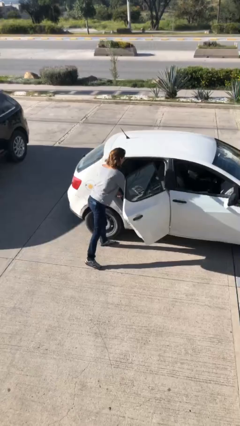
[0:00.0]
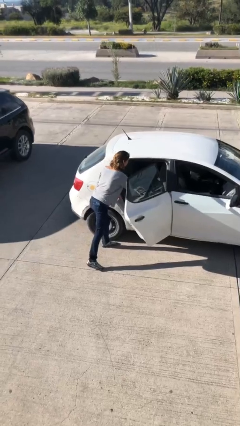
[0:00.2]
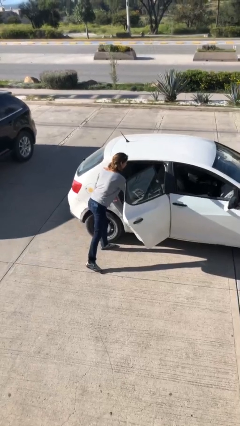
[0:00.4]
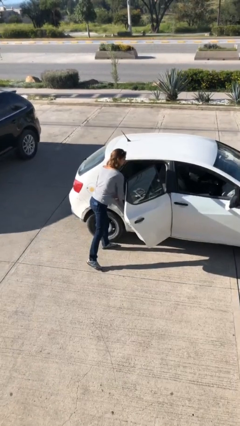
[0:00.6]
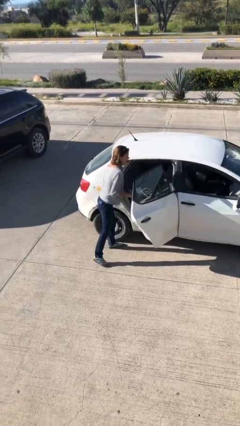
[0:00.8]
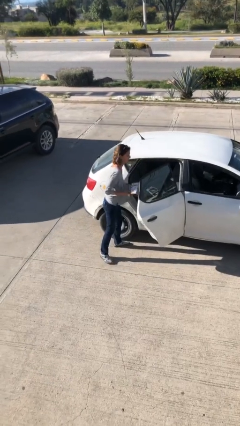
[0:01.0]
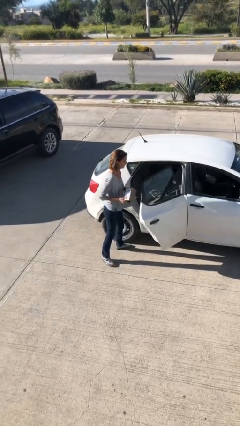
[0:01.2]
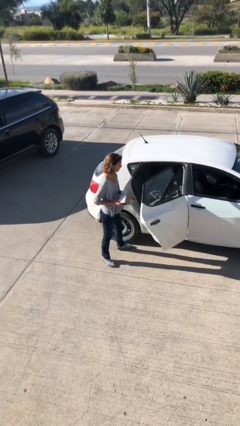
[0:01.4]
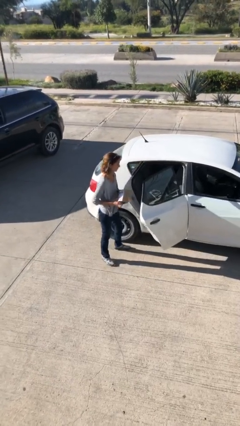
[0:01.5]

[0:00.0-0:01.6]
person unloads car

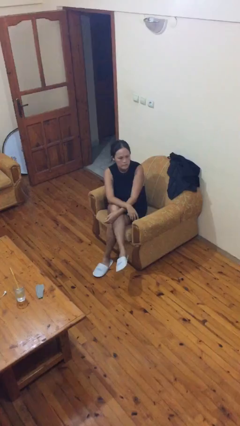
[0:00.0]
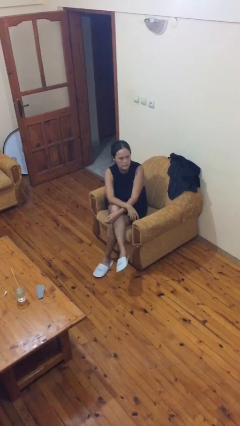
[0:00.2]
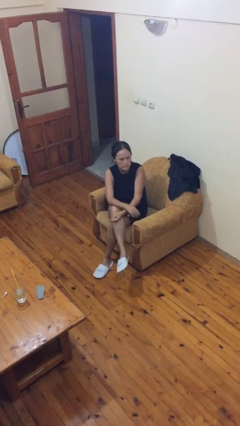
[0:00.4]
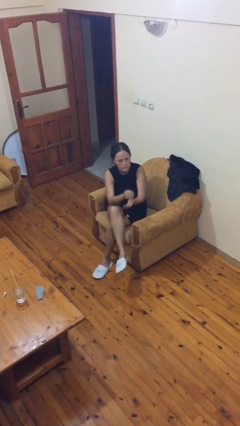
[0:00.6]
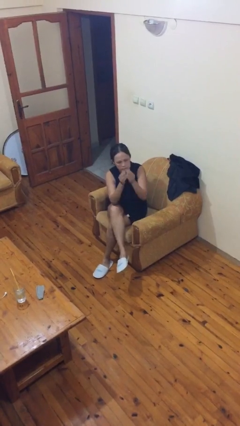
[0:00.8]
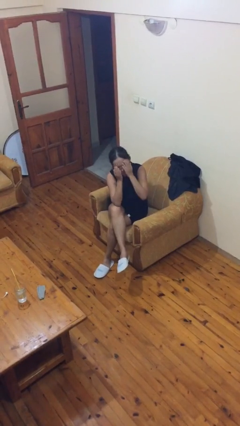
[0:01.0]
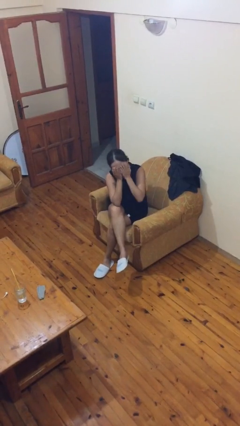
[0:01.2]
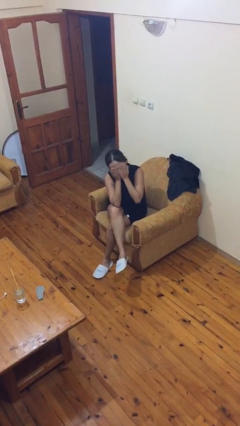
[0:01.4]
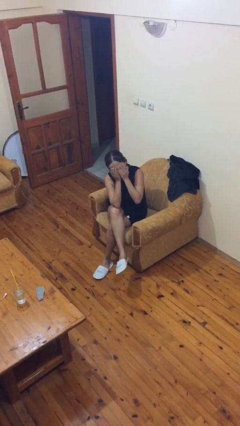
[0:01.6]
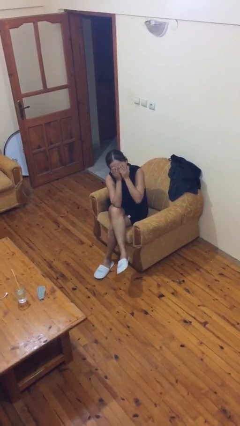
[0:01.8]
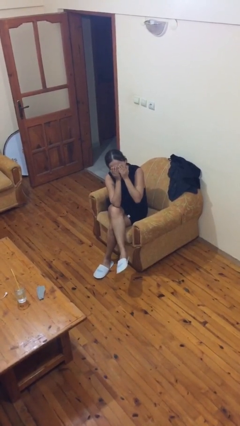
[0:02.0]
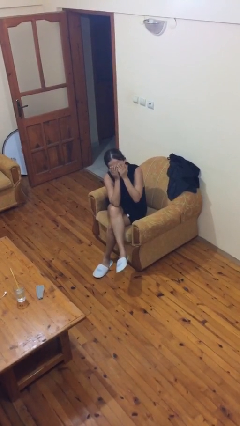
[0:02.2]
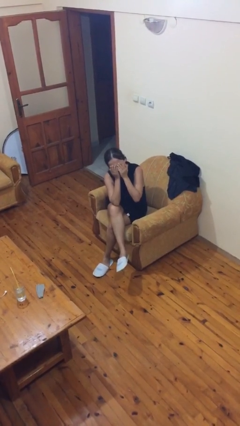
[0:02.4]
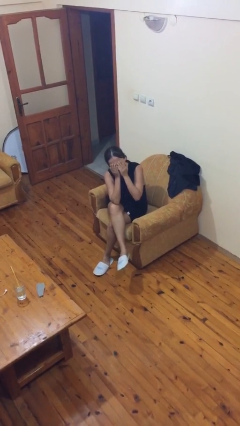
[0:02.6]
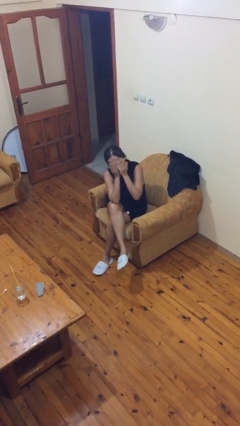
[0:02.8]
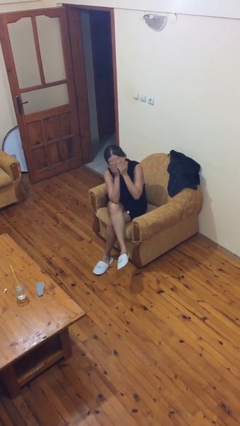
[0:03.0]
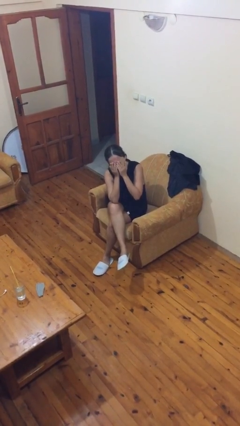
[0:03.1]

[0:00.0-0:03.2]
person covers face with hands

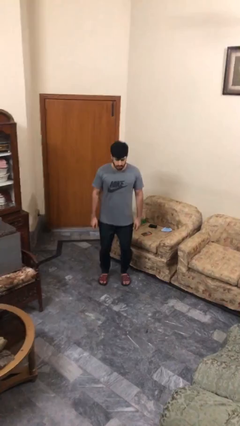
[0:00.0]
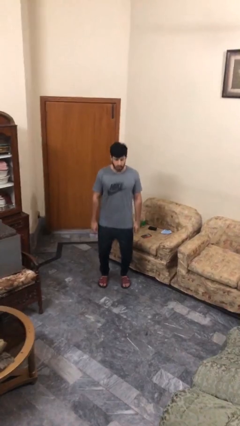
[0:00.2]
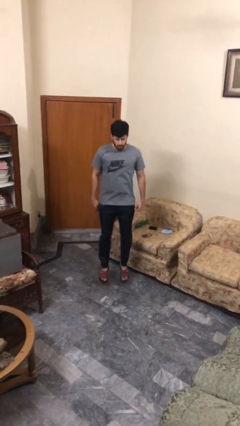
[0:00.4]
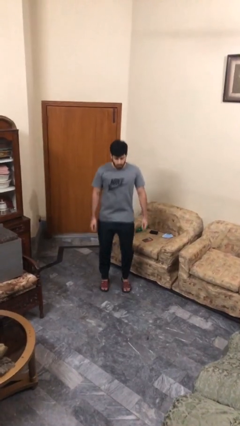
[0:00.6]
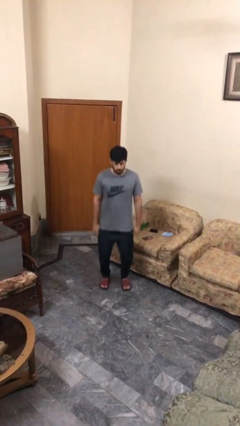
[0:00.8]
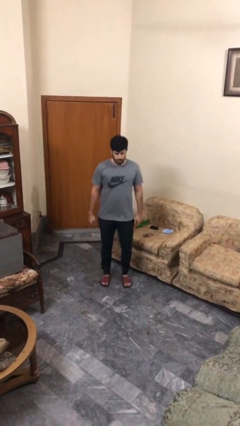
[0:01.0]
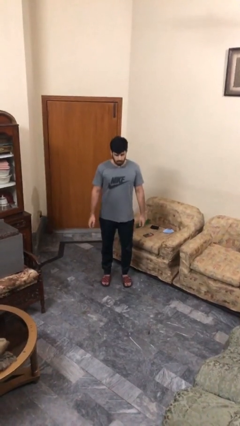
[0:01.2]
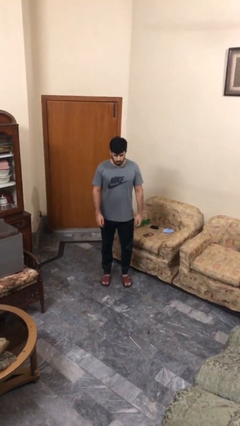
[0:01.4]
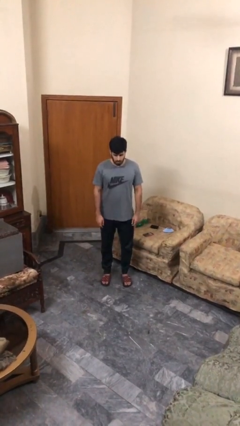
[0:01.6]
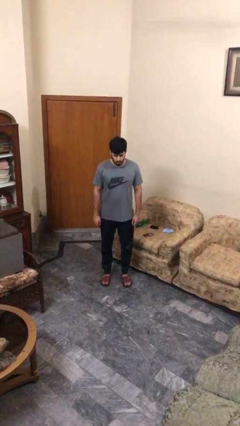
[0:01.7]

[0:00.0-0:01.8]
person jumps

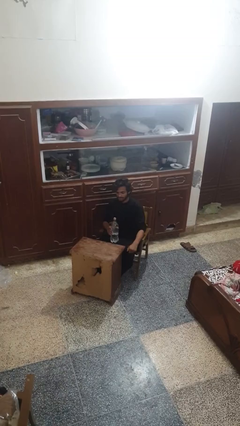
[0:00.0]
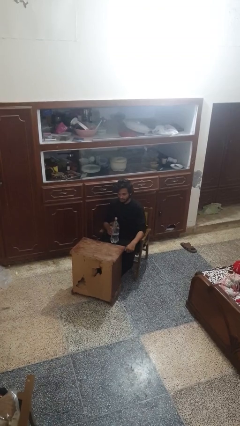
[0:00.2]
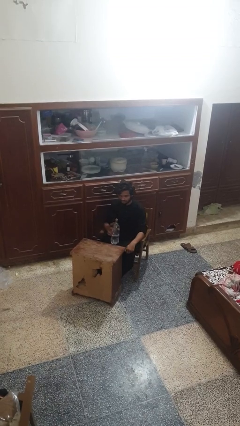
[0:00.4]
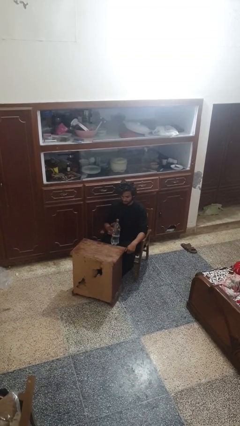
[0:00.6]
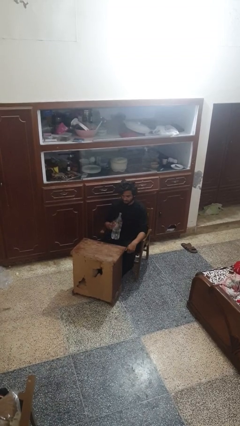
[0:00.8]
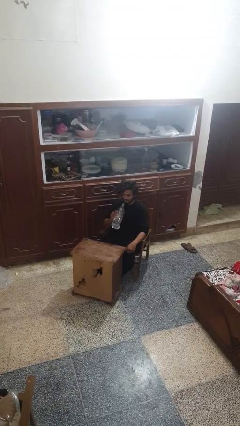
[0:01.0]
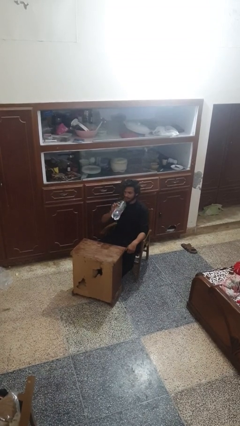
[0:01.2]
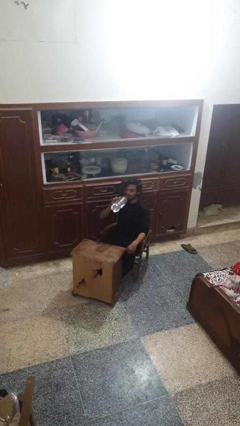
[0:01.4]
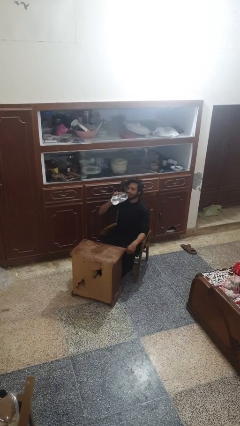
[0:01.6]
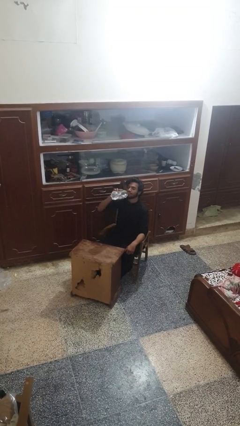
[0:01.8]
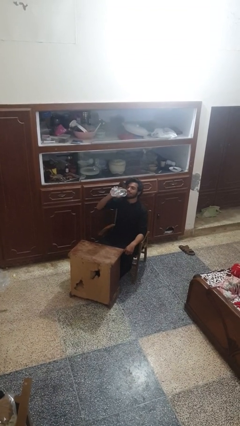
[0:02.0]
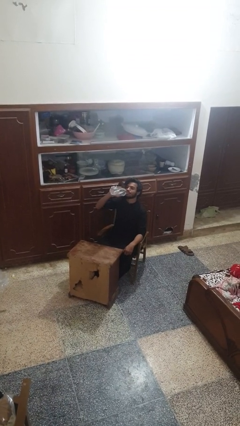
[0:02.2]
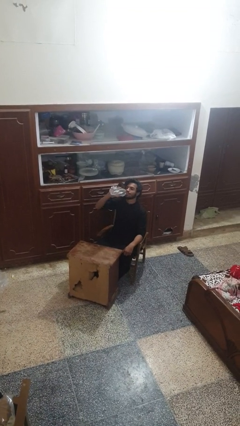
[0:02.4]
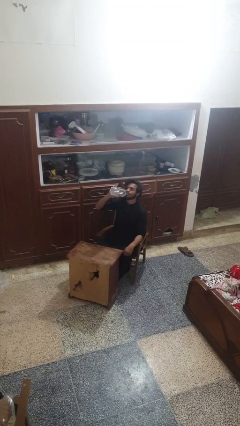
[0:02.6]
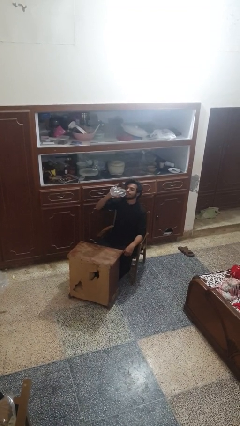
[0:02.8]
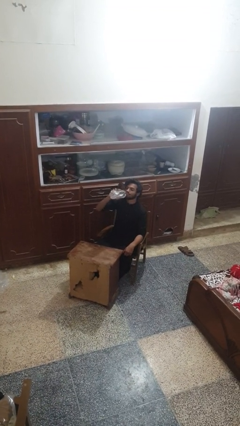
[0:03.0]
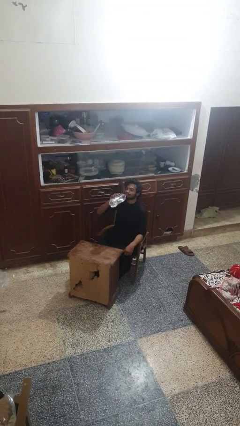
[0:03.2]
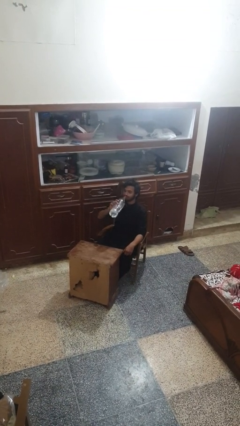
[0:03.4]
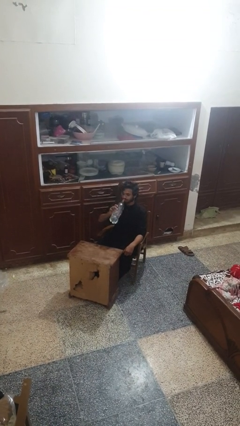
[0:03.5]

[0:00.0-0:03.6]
person drinks from bottle

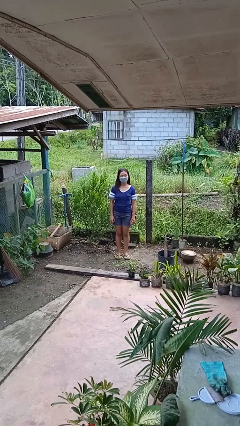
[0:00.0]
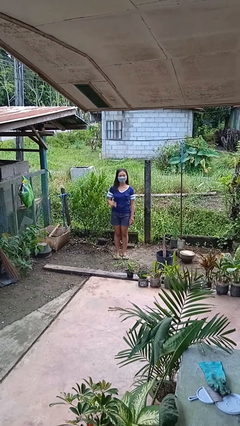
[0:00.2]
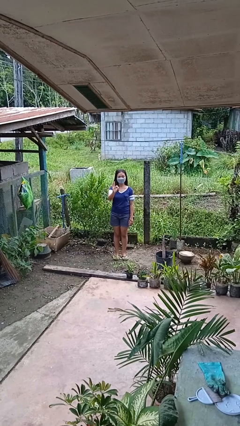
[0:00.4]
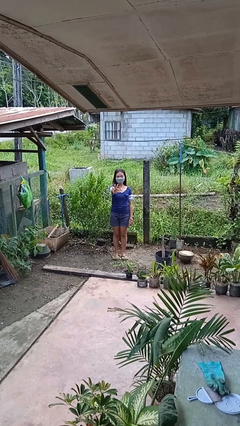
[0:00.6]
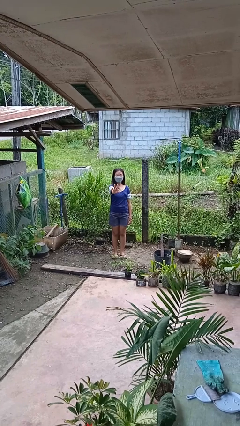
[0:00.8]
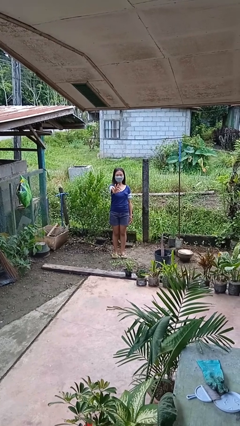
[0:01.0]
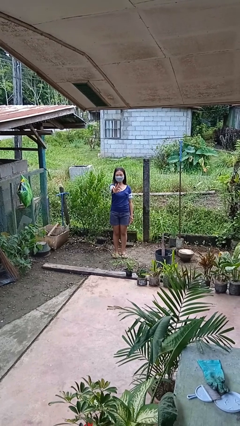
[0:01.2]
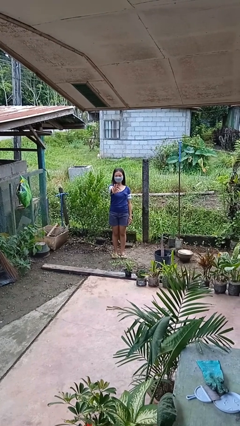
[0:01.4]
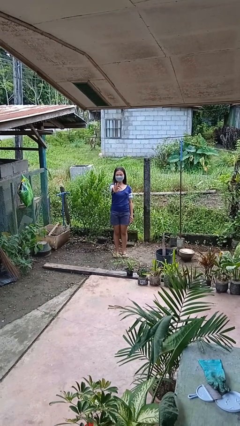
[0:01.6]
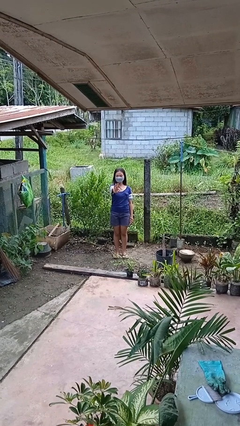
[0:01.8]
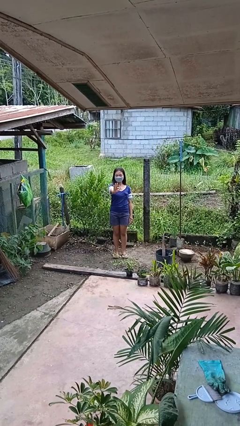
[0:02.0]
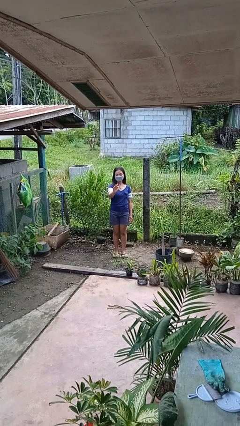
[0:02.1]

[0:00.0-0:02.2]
person gestures number three

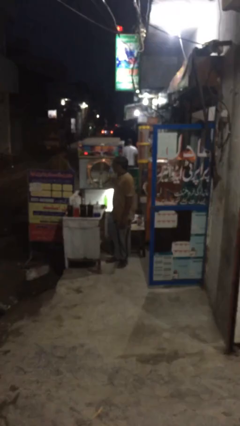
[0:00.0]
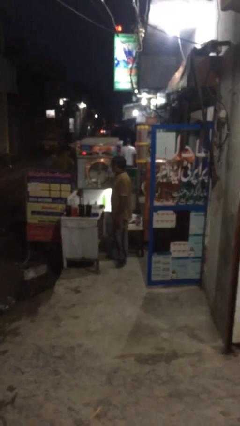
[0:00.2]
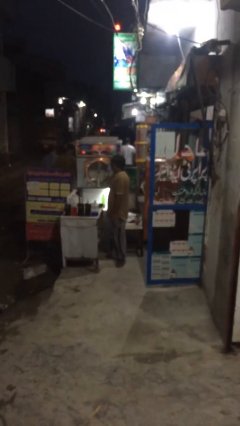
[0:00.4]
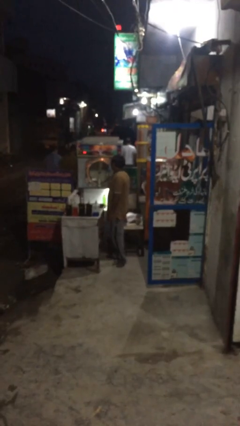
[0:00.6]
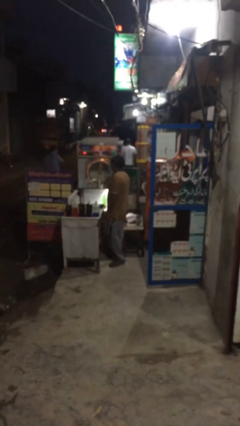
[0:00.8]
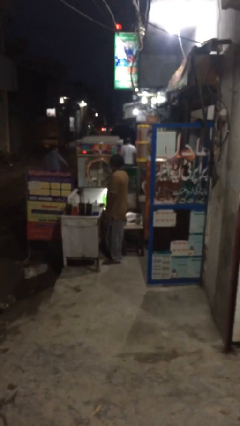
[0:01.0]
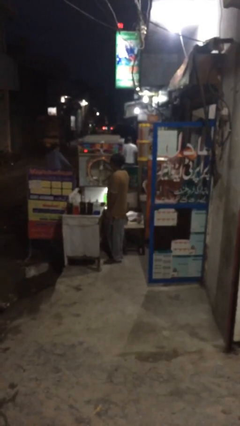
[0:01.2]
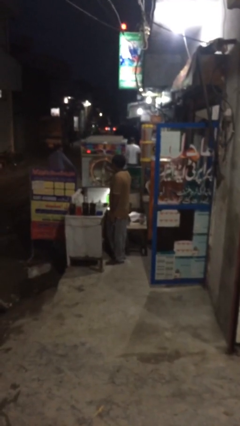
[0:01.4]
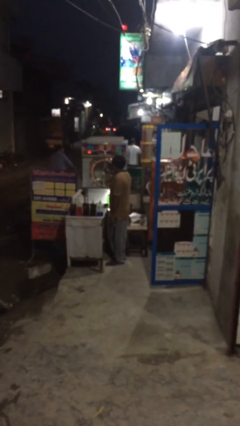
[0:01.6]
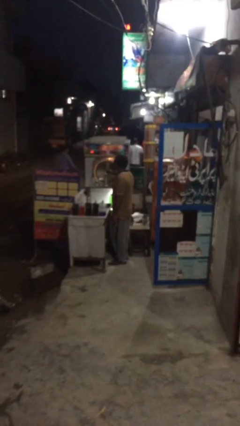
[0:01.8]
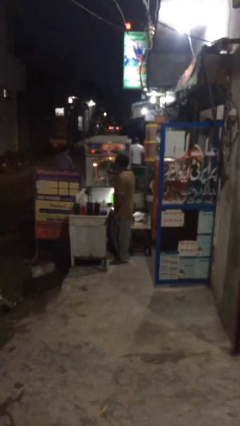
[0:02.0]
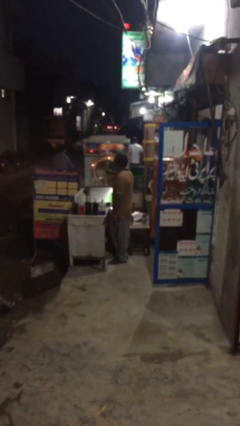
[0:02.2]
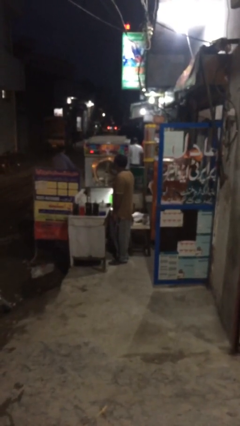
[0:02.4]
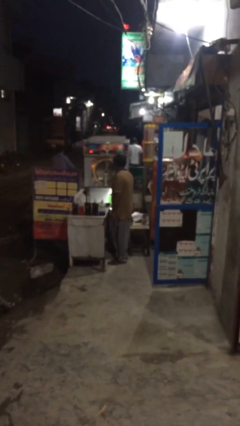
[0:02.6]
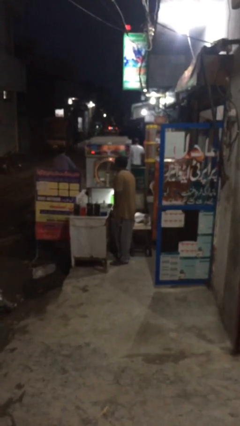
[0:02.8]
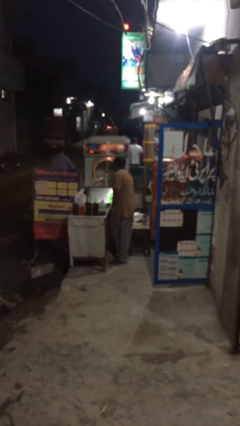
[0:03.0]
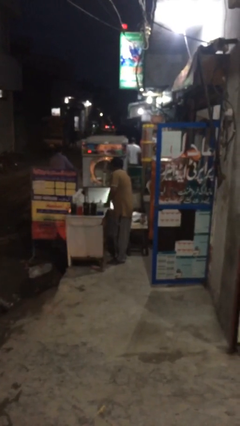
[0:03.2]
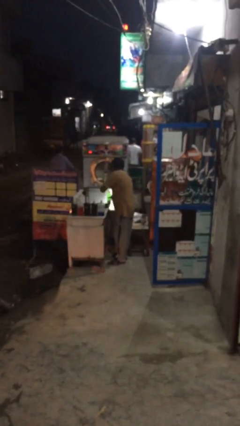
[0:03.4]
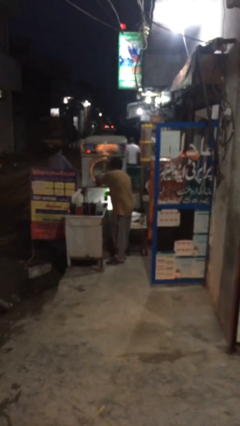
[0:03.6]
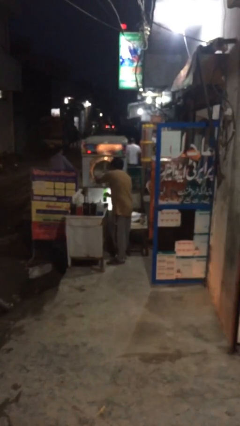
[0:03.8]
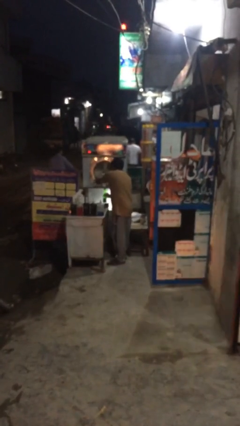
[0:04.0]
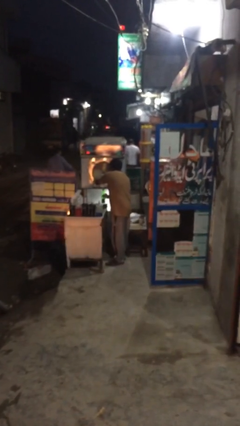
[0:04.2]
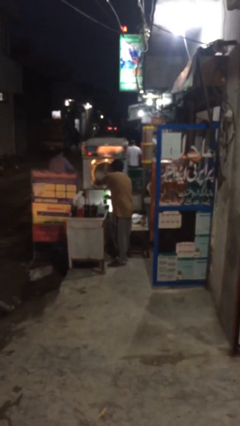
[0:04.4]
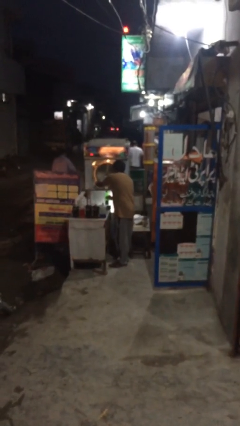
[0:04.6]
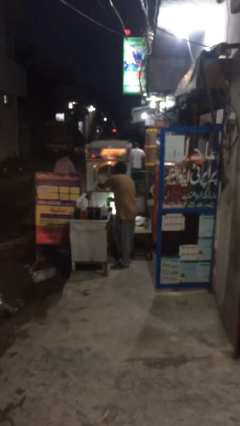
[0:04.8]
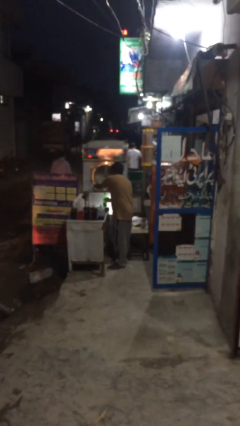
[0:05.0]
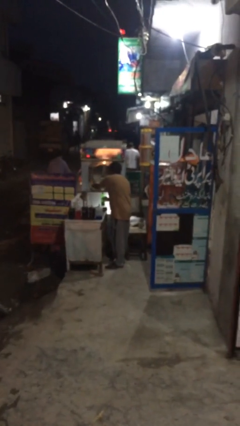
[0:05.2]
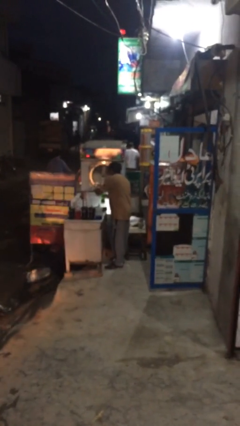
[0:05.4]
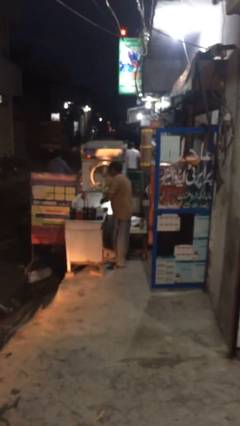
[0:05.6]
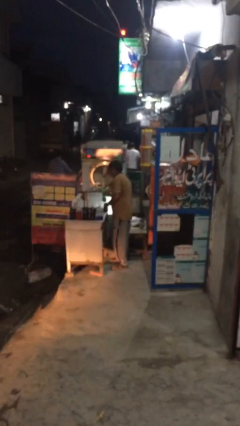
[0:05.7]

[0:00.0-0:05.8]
person purchases from machine
